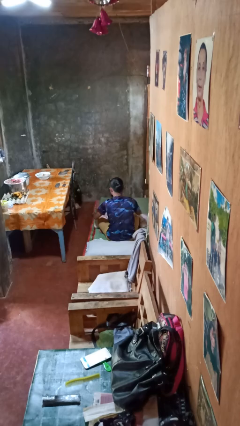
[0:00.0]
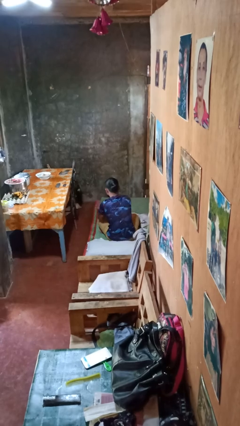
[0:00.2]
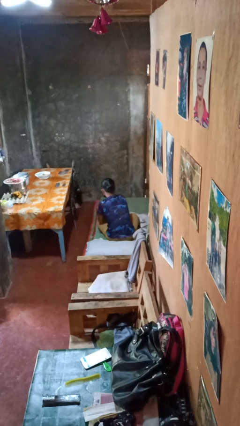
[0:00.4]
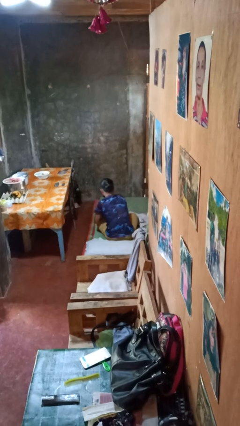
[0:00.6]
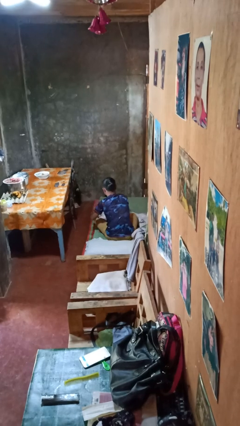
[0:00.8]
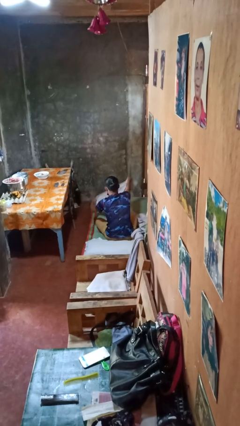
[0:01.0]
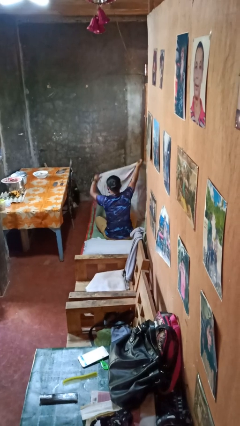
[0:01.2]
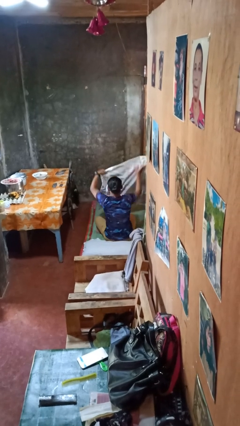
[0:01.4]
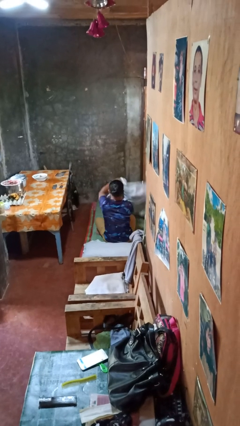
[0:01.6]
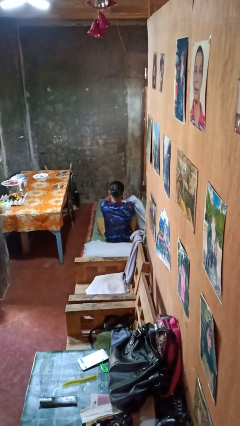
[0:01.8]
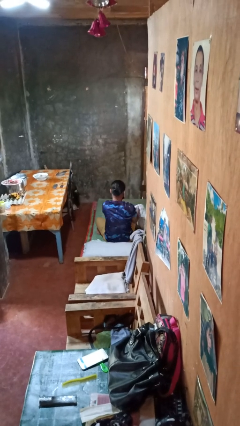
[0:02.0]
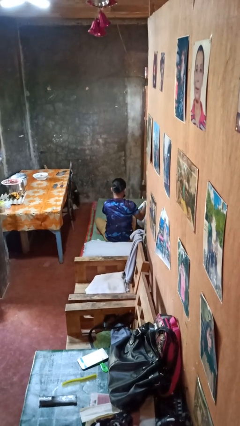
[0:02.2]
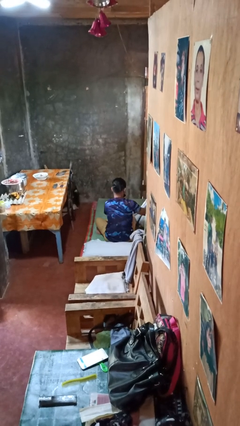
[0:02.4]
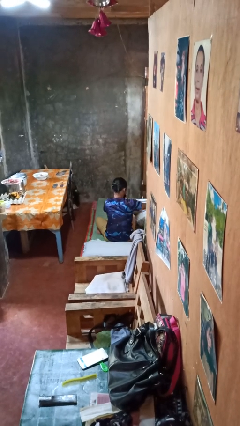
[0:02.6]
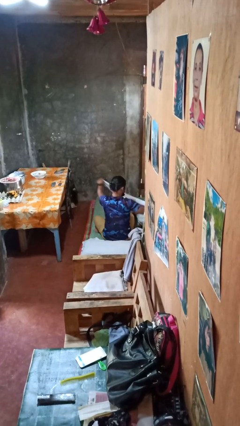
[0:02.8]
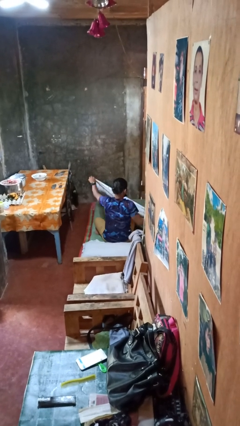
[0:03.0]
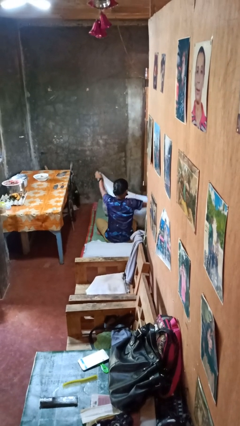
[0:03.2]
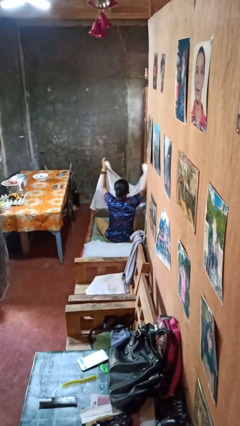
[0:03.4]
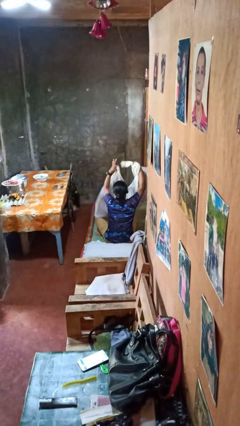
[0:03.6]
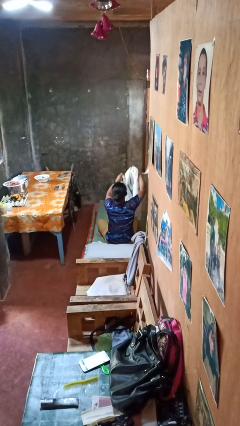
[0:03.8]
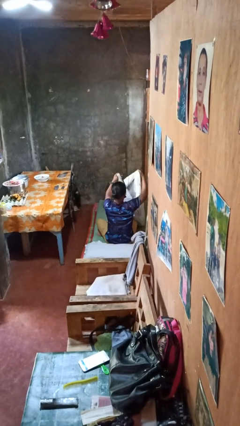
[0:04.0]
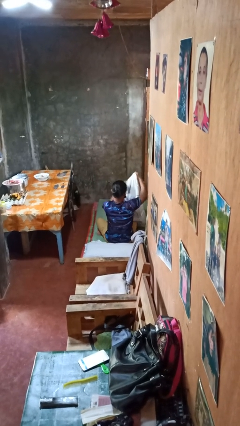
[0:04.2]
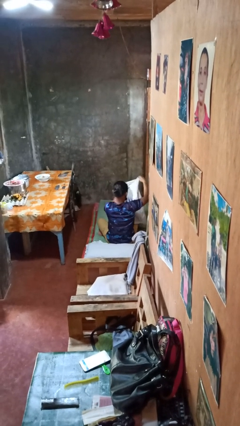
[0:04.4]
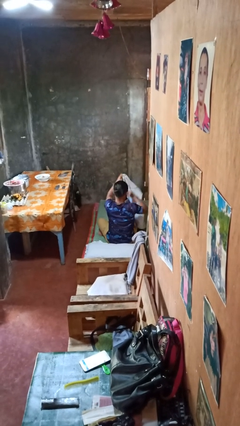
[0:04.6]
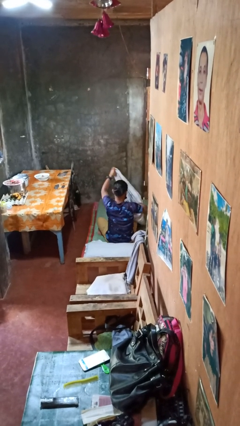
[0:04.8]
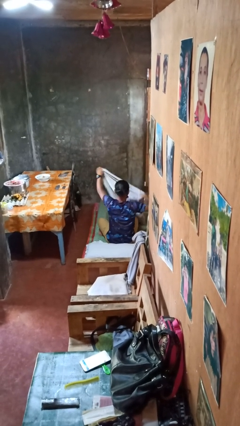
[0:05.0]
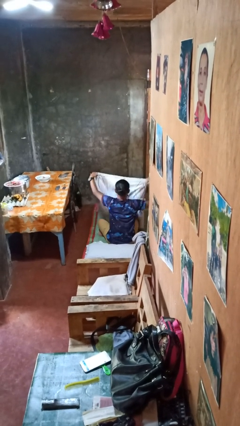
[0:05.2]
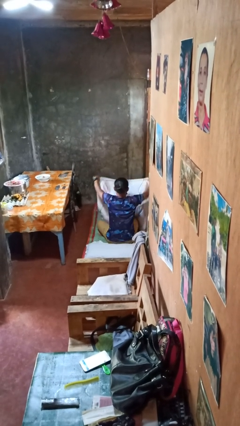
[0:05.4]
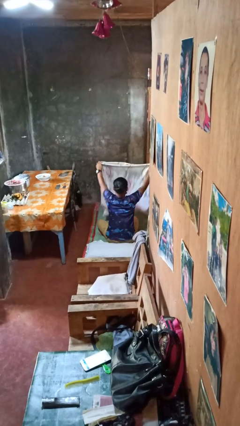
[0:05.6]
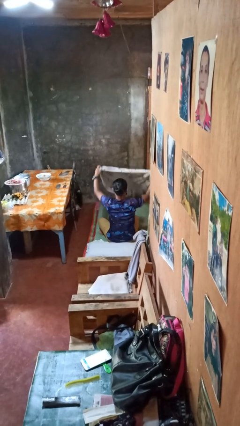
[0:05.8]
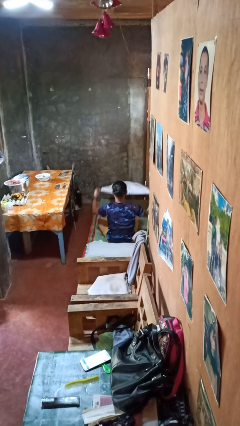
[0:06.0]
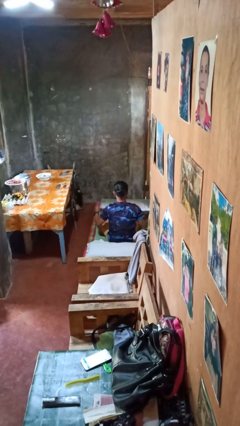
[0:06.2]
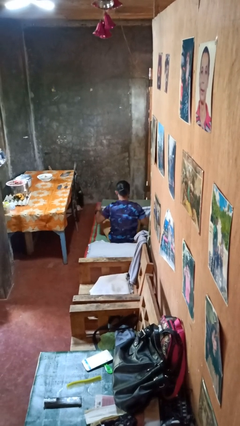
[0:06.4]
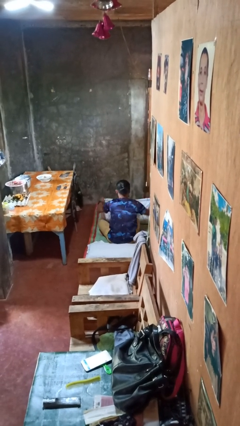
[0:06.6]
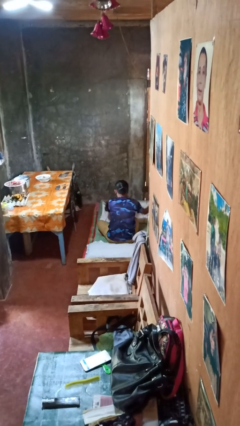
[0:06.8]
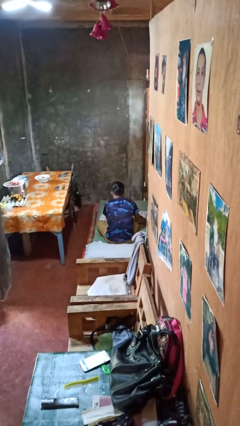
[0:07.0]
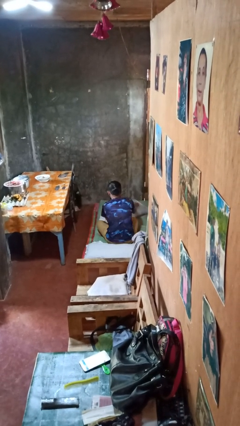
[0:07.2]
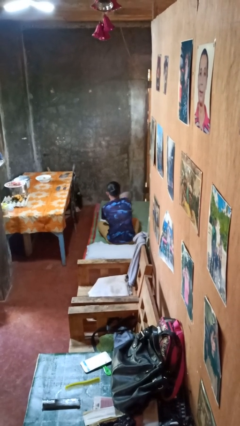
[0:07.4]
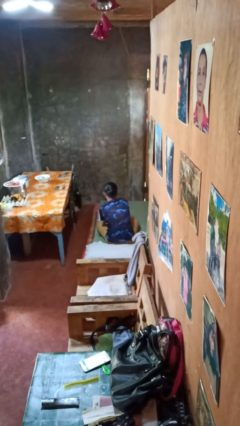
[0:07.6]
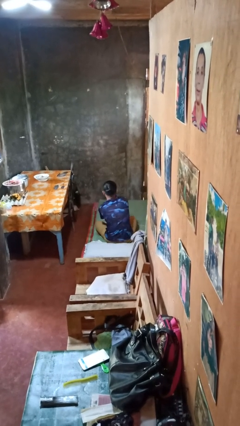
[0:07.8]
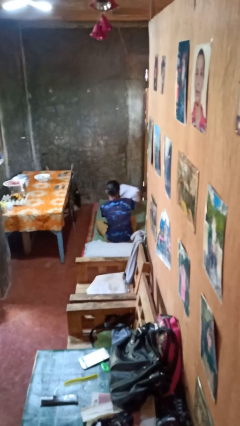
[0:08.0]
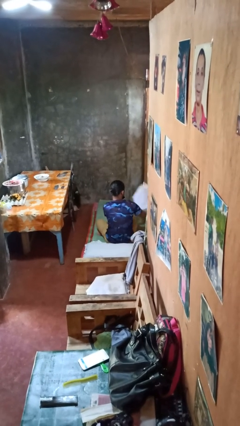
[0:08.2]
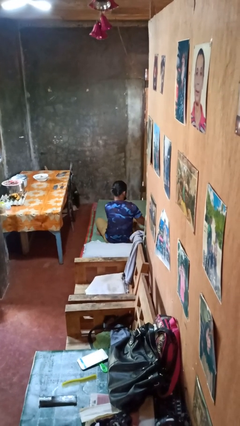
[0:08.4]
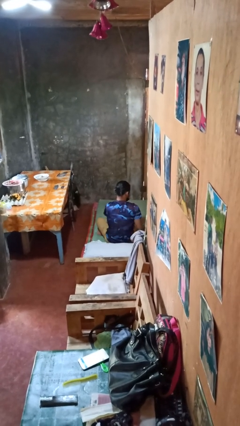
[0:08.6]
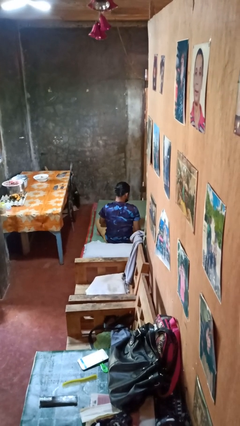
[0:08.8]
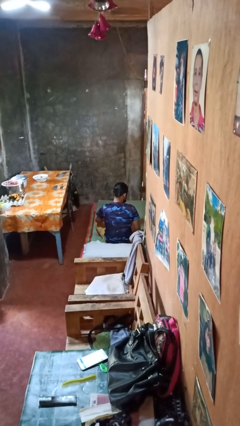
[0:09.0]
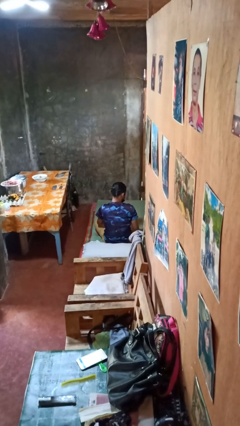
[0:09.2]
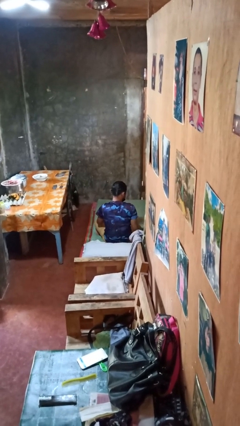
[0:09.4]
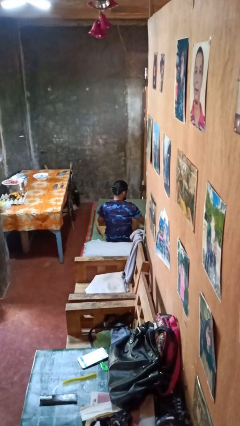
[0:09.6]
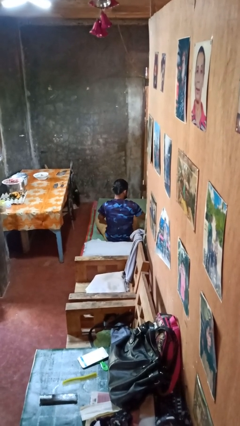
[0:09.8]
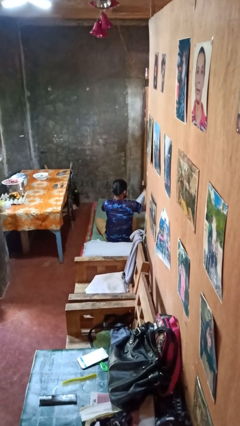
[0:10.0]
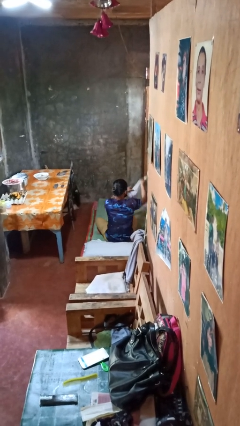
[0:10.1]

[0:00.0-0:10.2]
person folds blanket

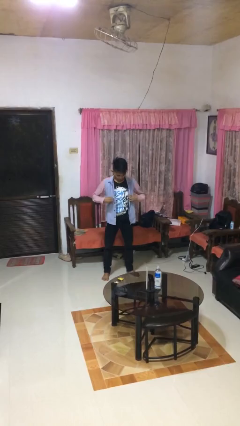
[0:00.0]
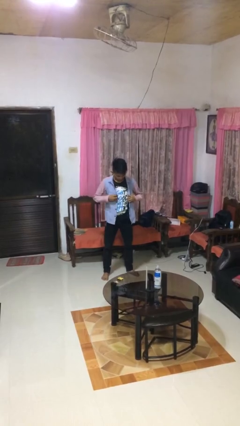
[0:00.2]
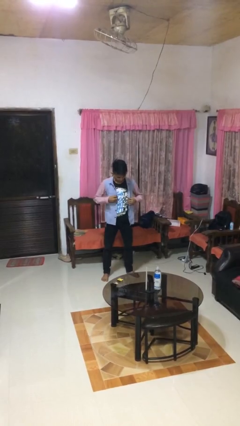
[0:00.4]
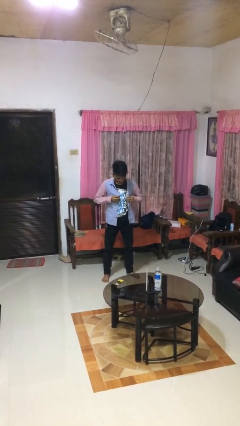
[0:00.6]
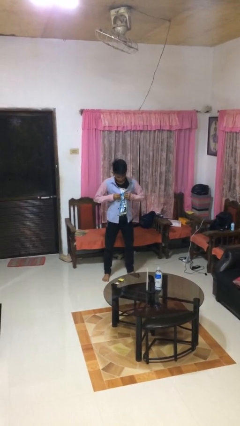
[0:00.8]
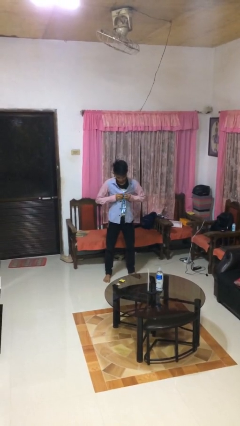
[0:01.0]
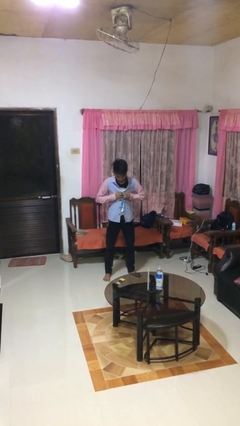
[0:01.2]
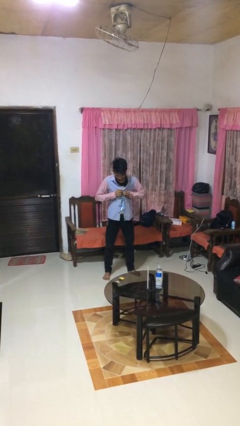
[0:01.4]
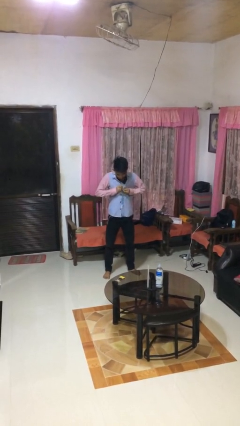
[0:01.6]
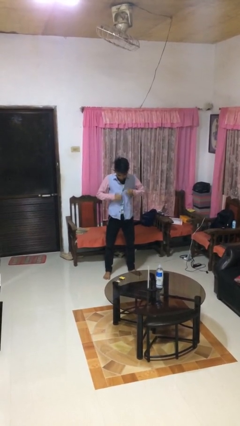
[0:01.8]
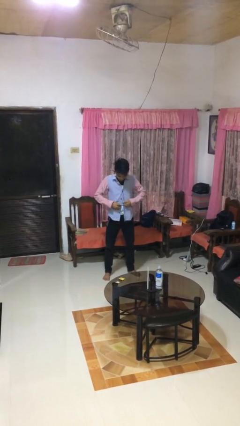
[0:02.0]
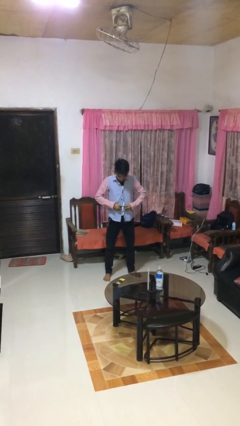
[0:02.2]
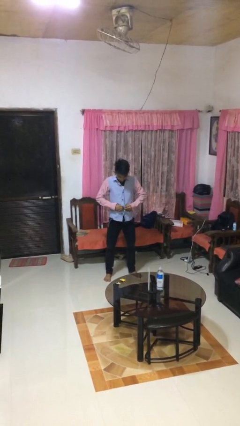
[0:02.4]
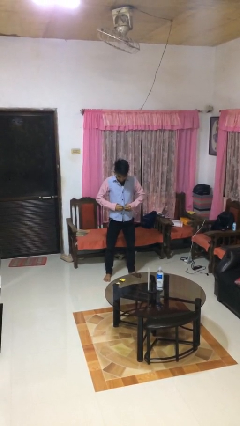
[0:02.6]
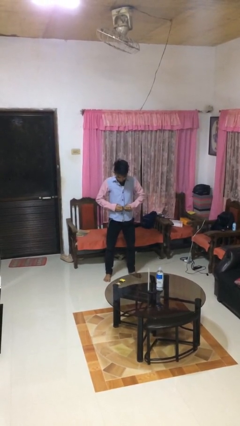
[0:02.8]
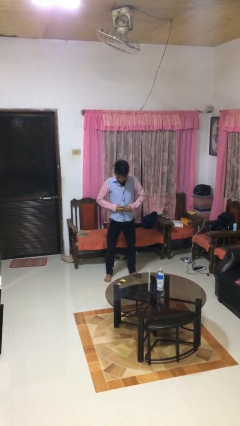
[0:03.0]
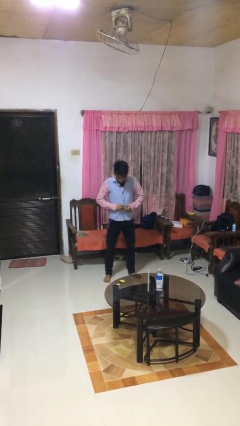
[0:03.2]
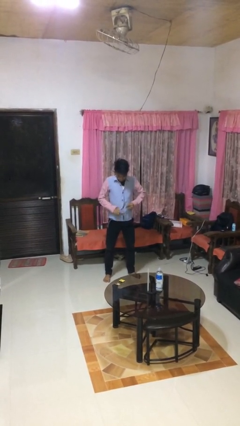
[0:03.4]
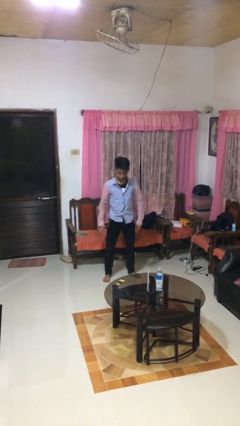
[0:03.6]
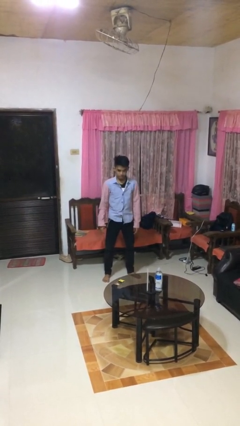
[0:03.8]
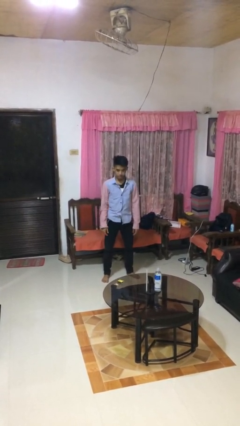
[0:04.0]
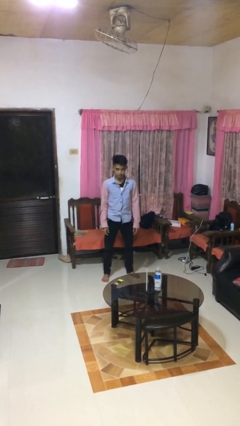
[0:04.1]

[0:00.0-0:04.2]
person buttons shirt

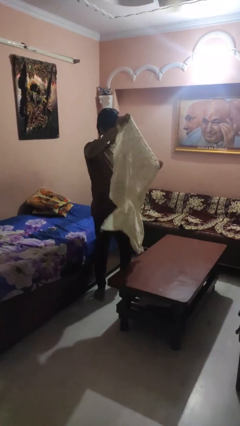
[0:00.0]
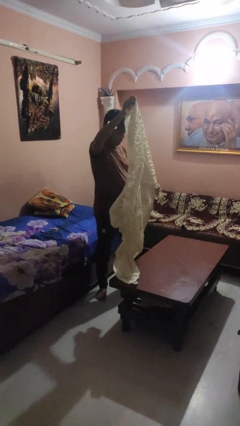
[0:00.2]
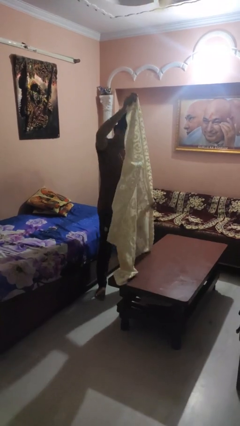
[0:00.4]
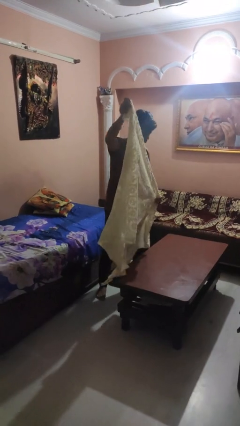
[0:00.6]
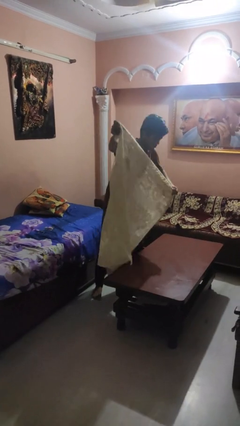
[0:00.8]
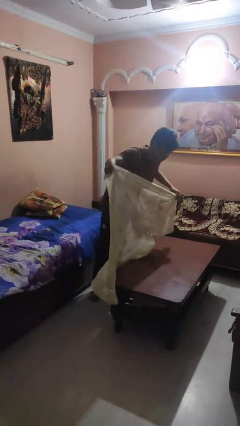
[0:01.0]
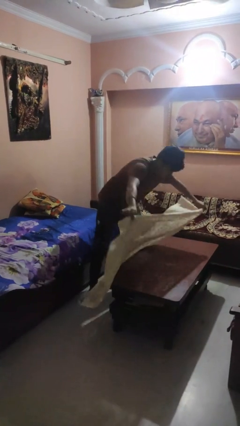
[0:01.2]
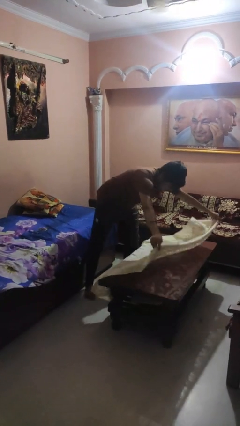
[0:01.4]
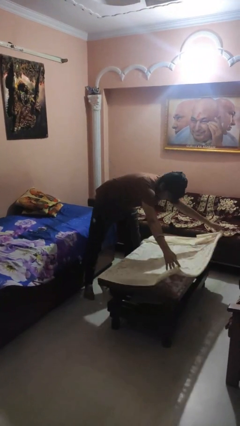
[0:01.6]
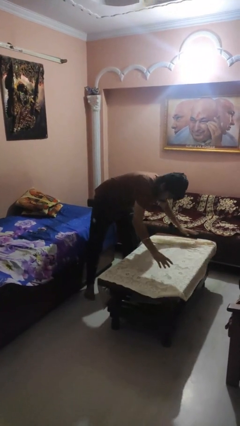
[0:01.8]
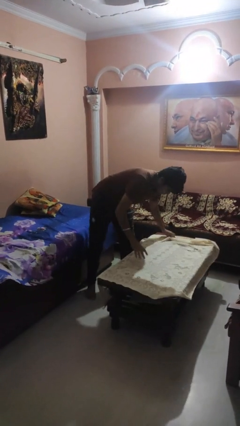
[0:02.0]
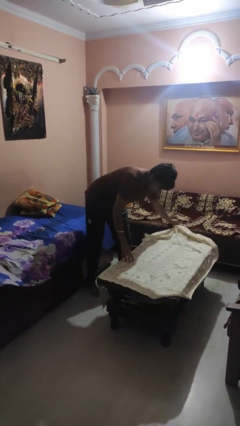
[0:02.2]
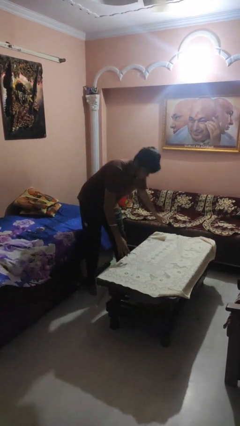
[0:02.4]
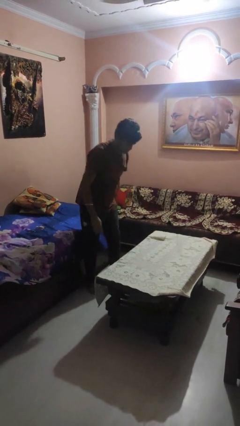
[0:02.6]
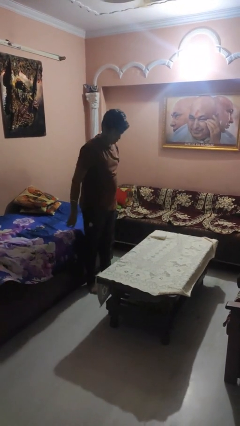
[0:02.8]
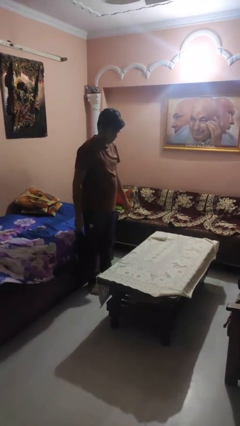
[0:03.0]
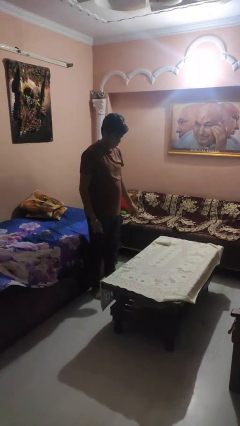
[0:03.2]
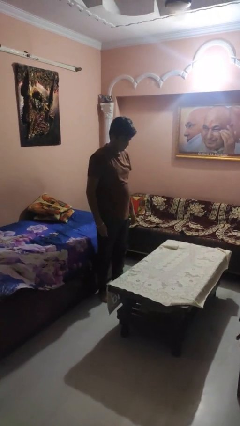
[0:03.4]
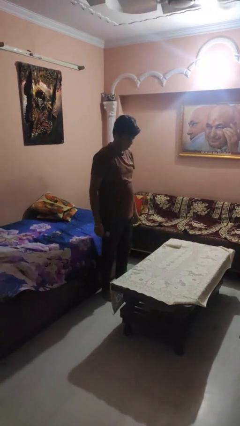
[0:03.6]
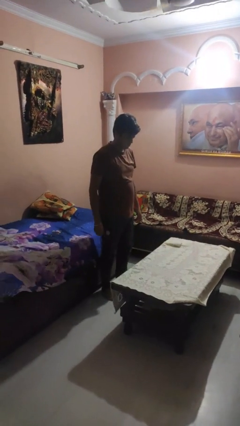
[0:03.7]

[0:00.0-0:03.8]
person spreads tablecloth
